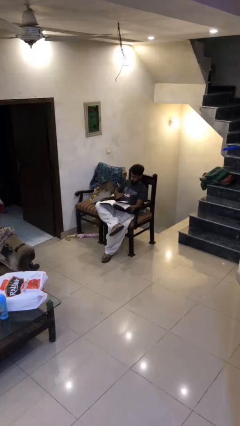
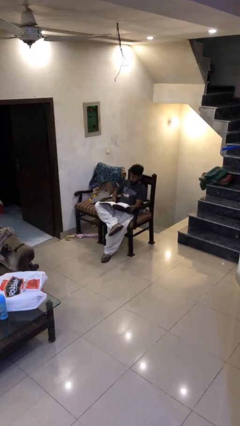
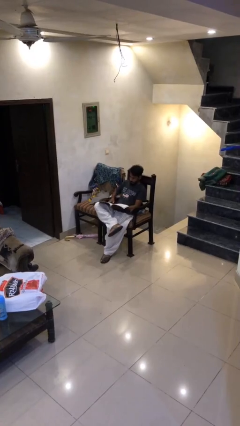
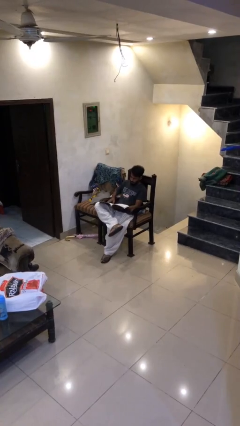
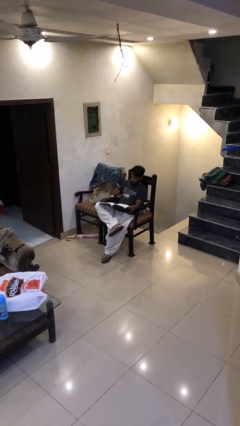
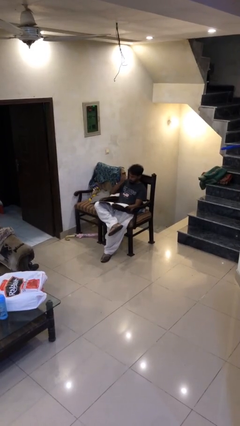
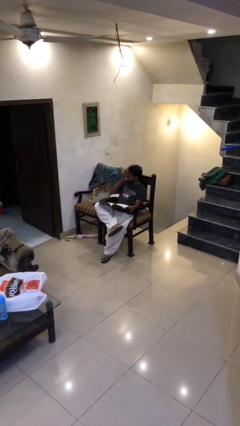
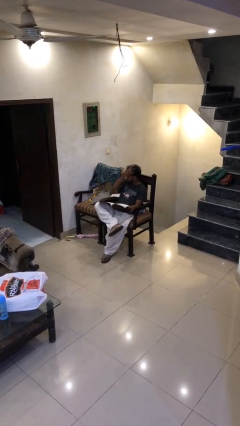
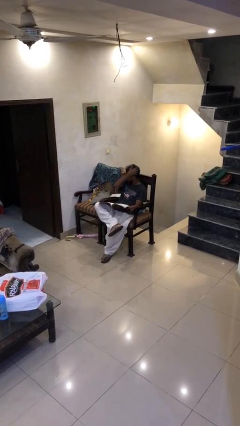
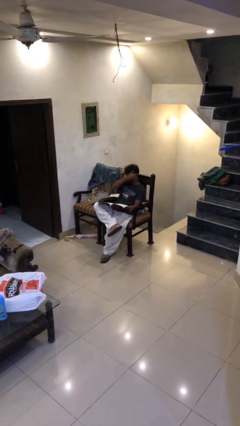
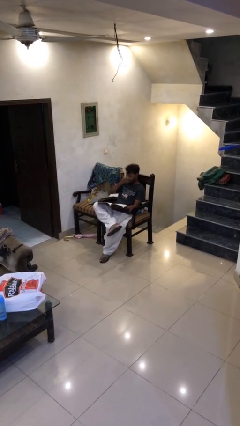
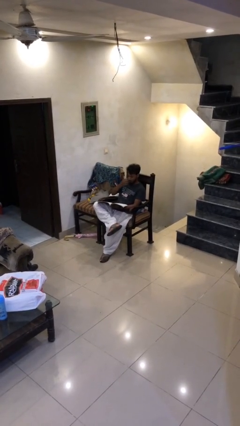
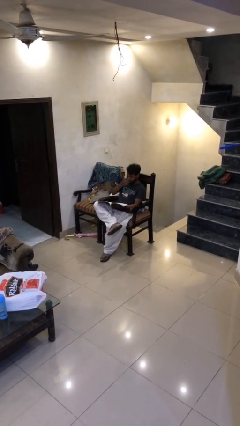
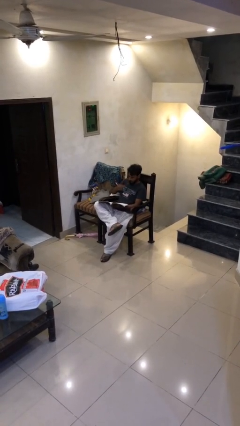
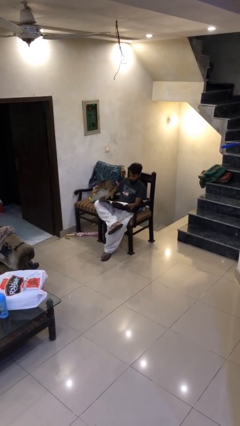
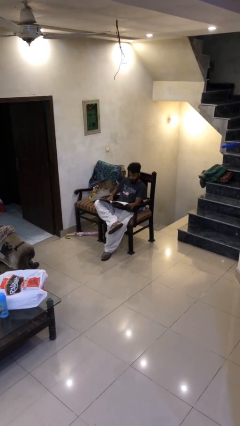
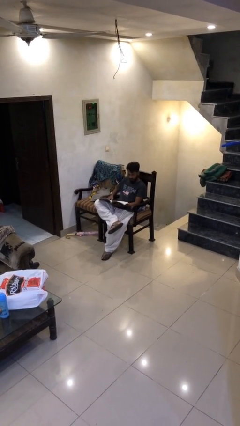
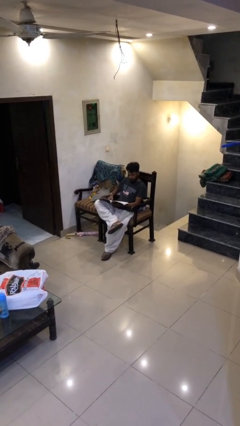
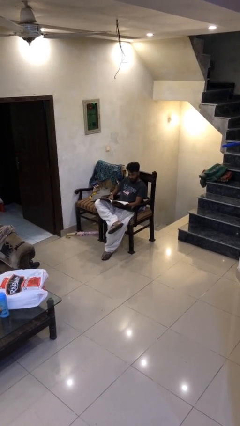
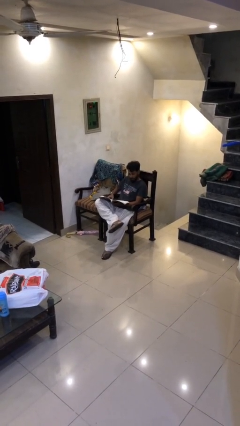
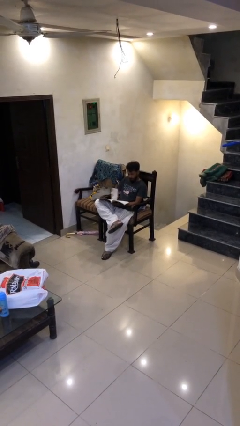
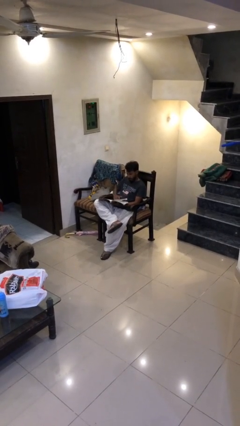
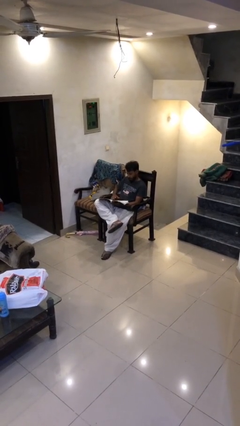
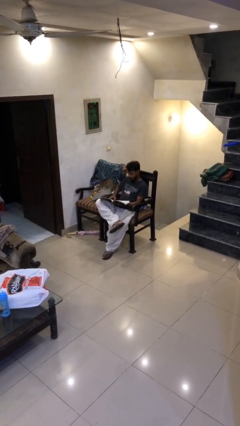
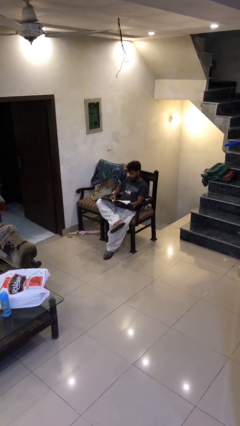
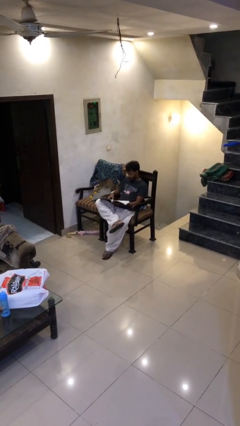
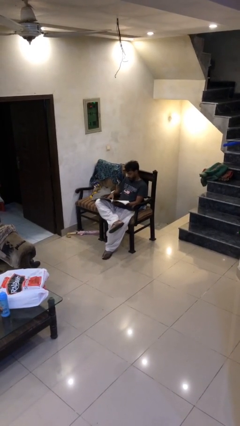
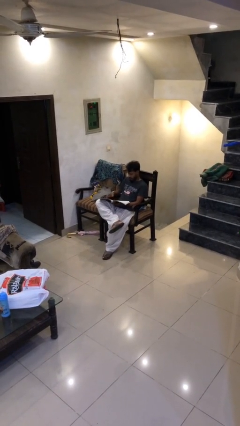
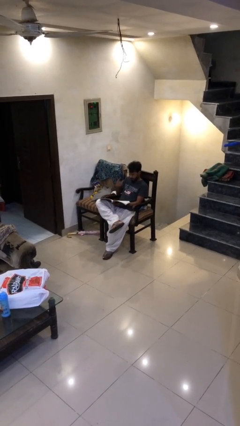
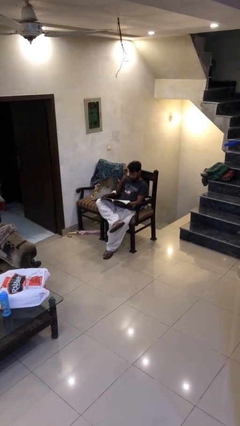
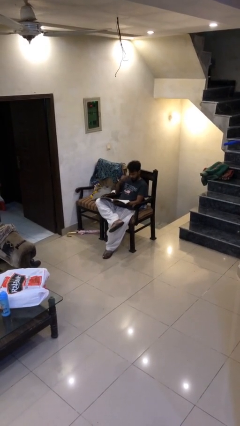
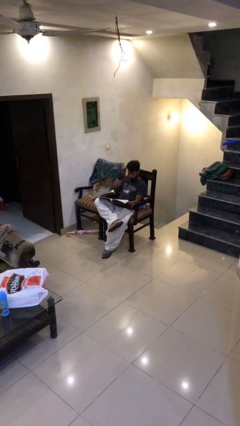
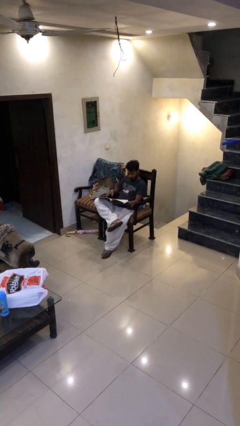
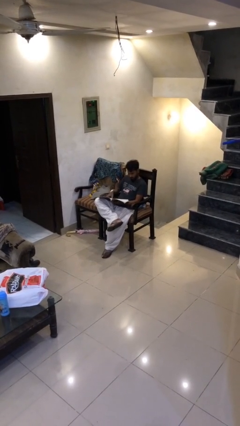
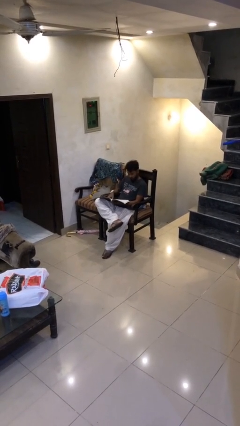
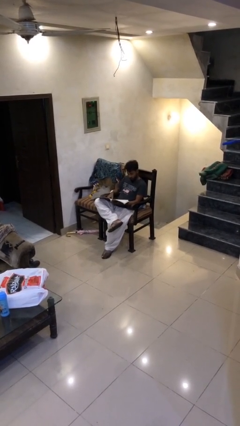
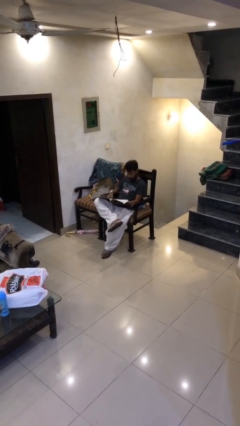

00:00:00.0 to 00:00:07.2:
person reads document

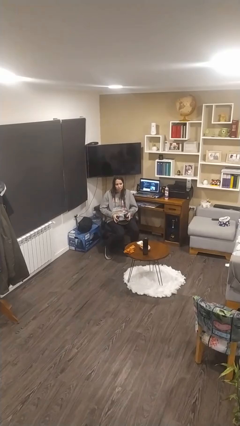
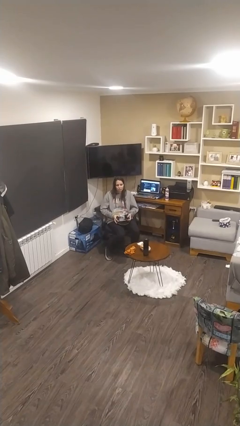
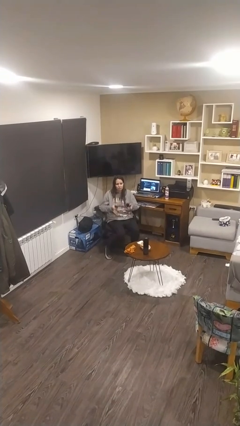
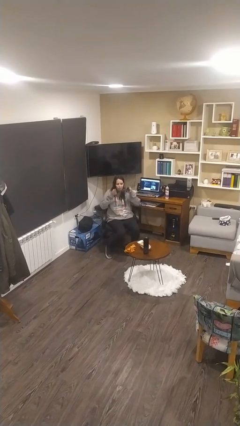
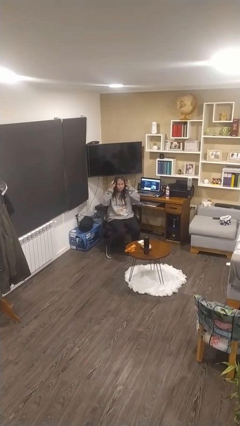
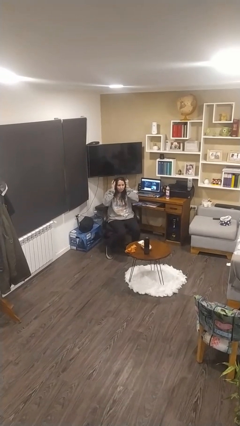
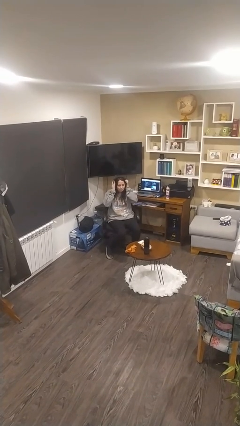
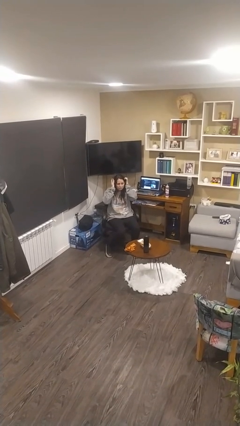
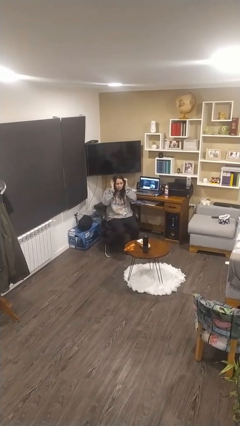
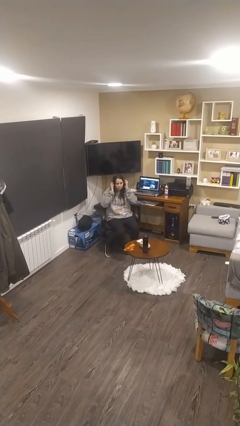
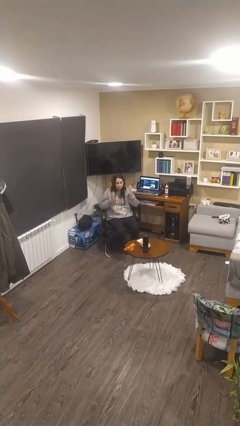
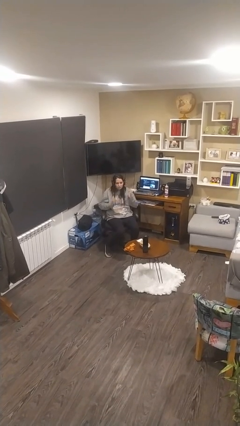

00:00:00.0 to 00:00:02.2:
person puts on headphones

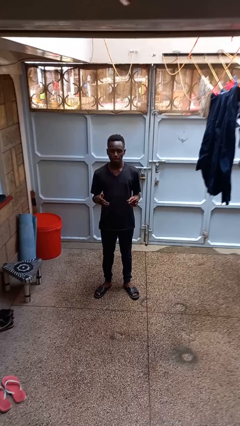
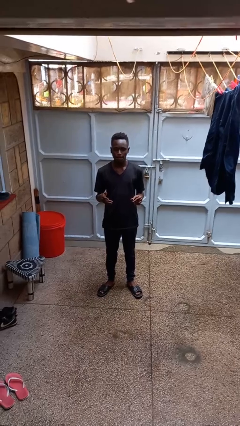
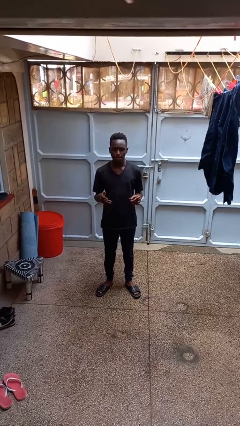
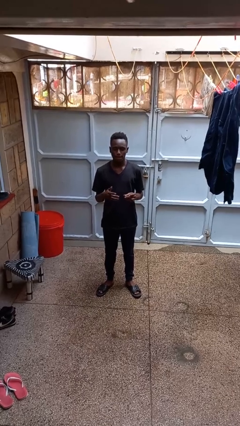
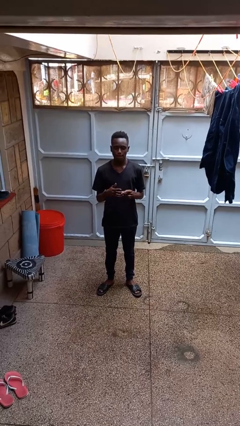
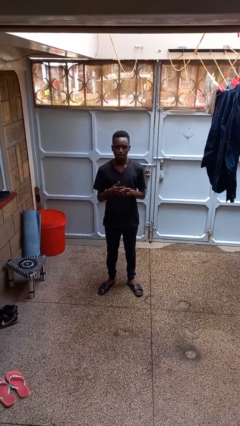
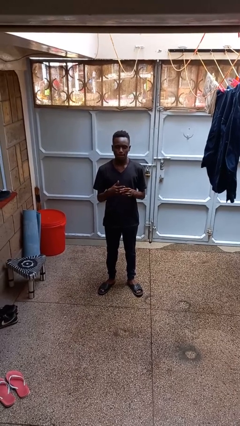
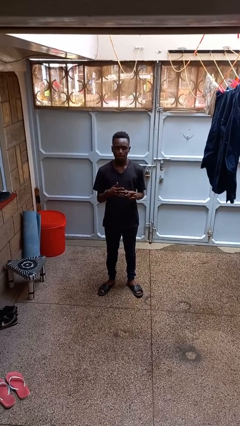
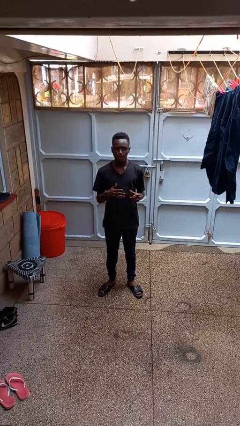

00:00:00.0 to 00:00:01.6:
person puts on ring

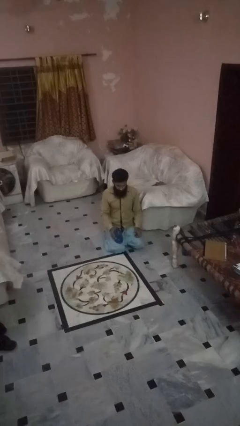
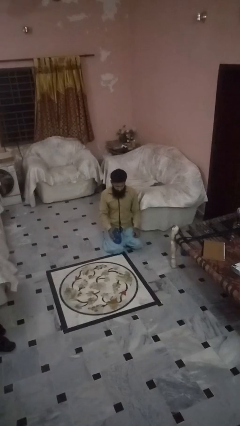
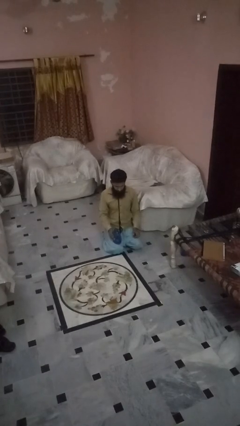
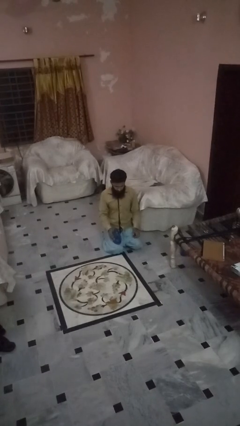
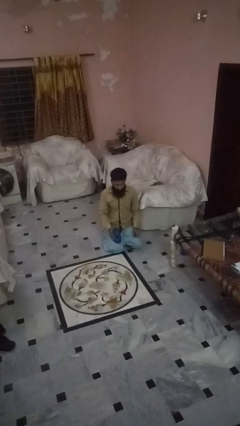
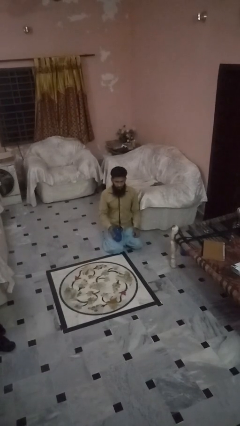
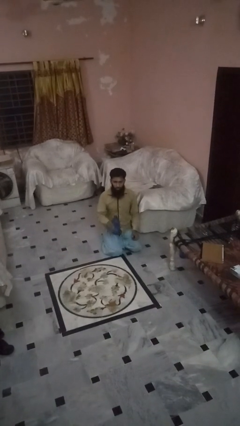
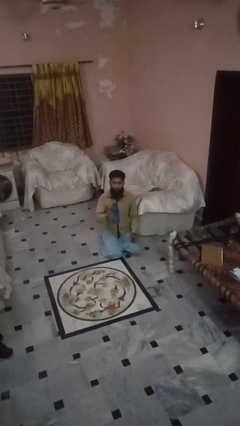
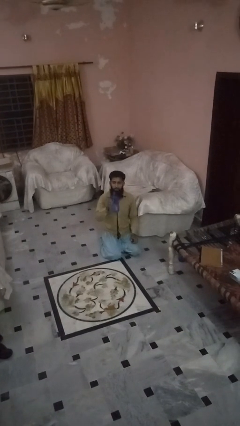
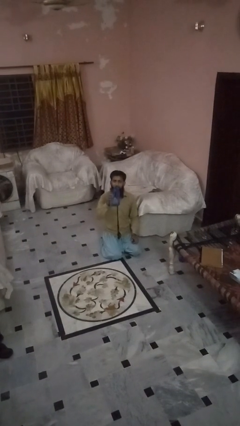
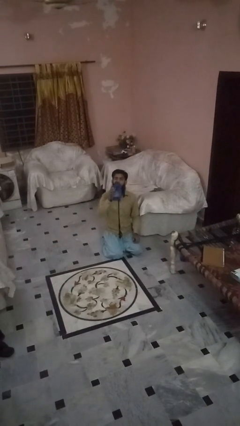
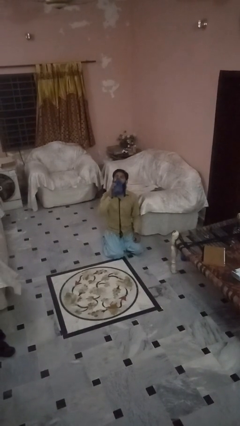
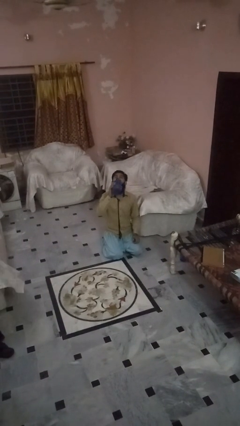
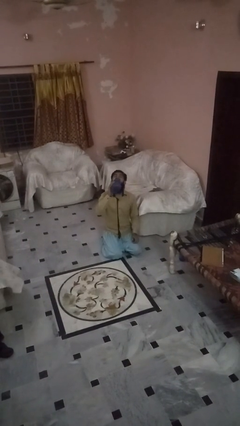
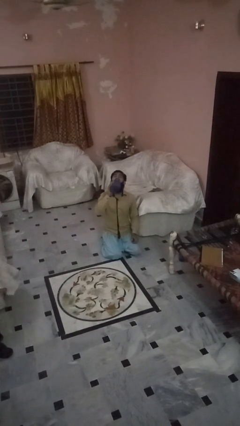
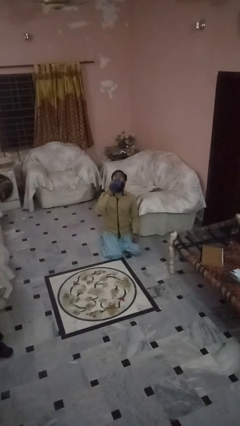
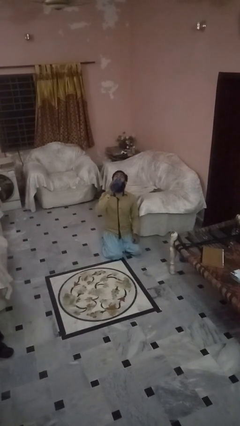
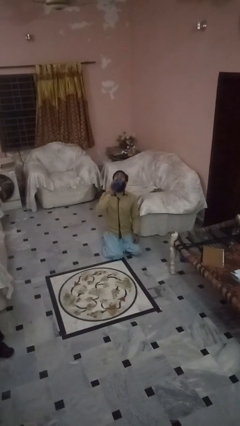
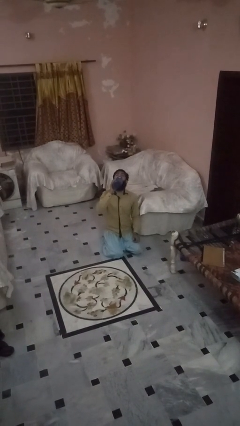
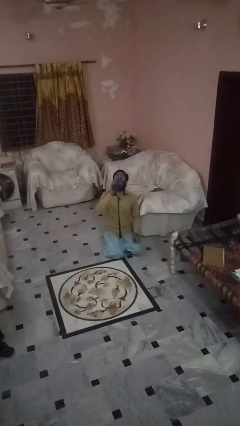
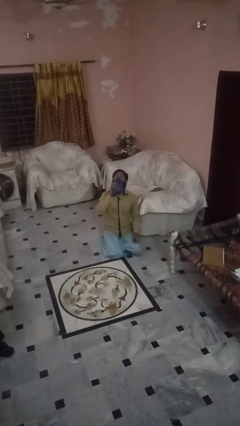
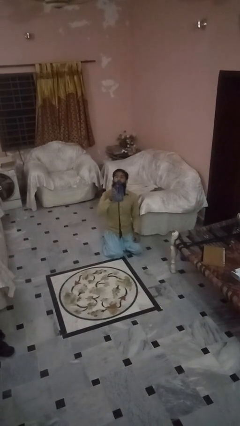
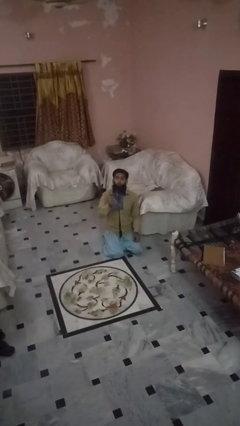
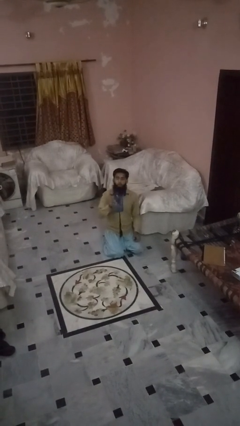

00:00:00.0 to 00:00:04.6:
person drinks from bottle

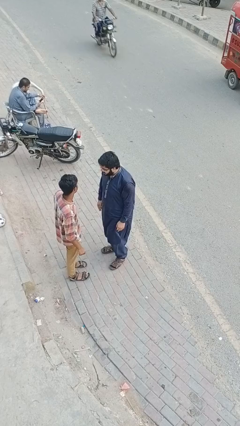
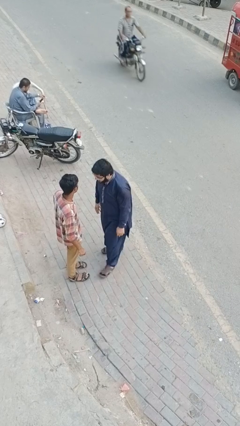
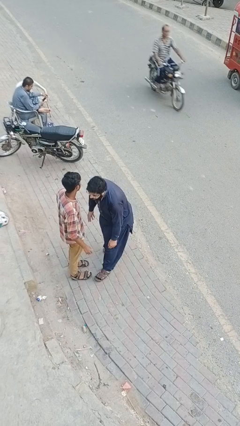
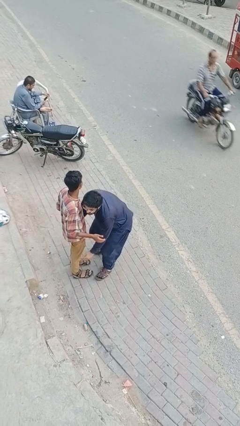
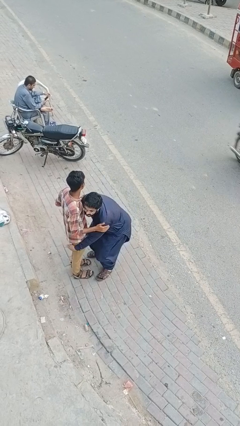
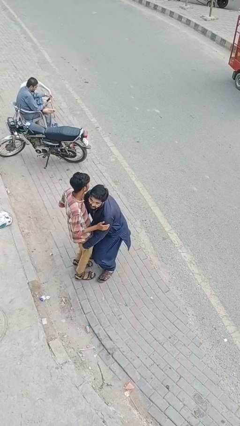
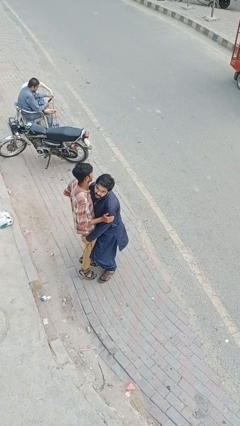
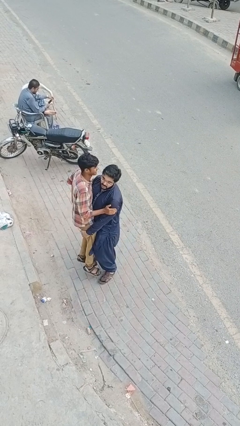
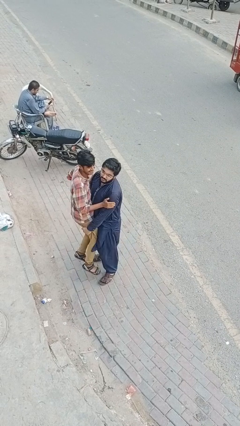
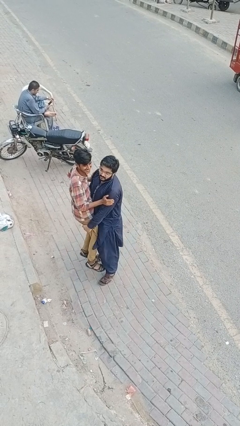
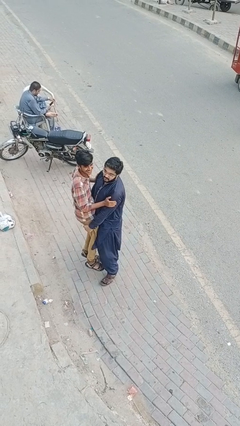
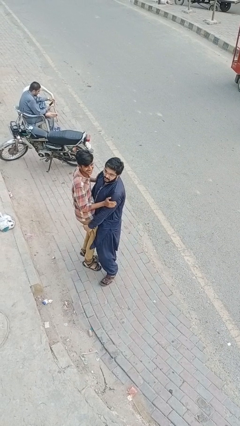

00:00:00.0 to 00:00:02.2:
person picks up person
